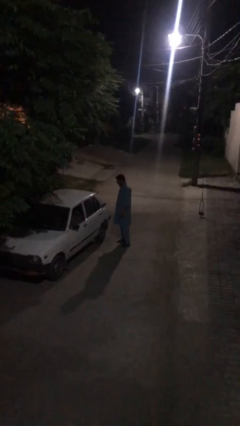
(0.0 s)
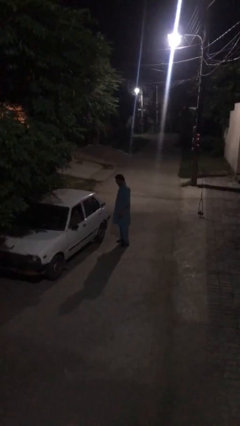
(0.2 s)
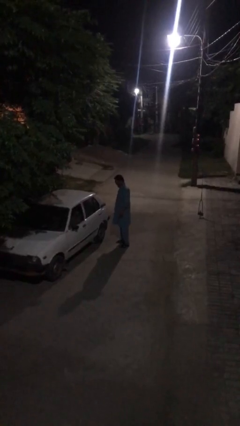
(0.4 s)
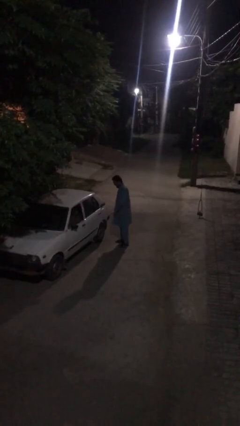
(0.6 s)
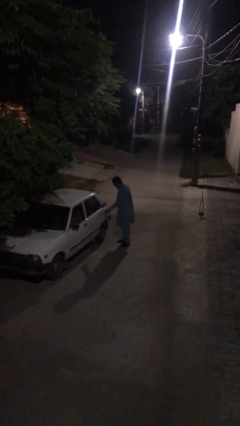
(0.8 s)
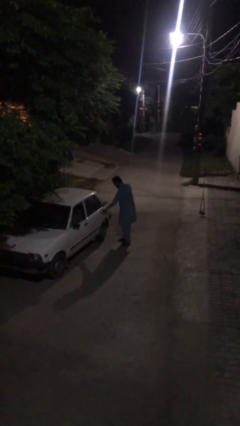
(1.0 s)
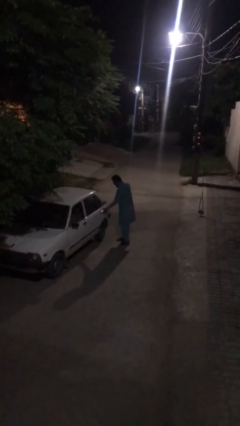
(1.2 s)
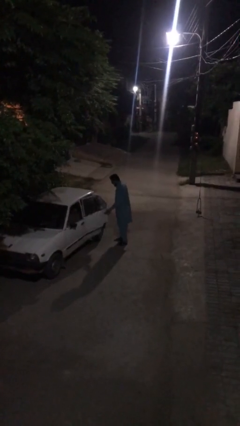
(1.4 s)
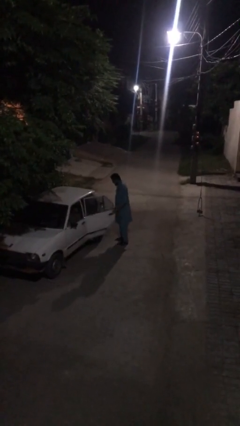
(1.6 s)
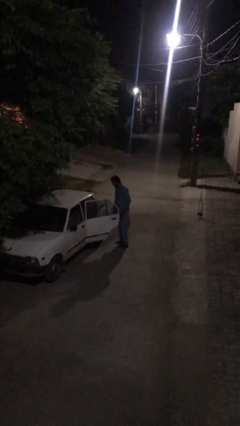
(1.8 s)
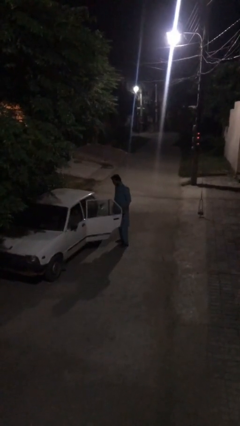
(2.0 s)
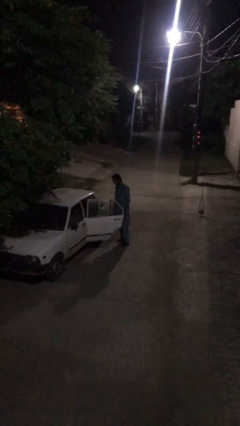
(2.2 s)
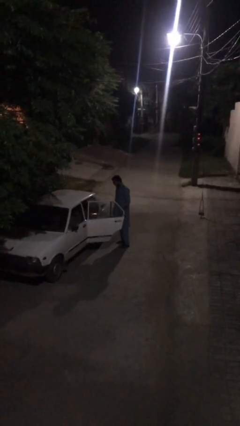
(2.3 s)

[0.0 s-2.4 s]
person opens car door

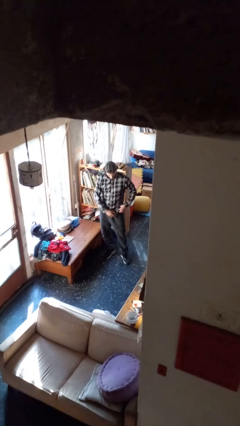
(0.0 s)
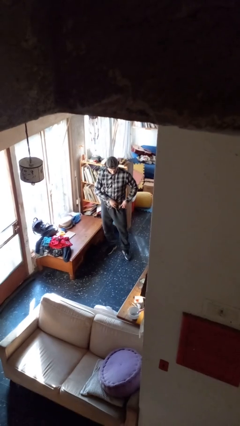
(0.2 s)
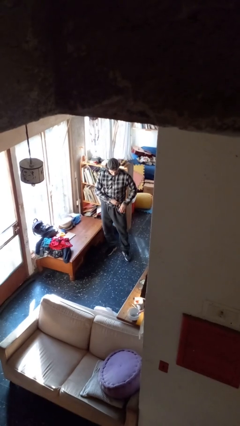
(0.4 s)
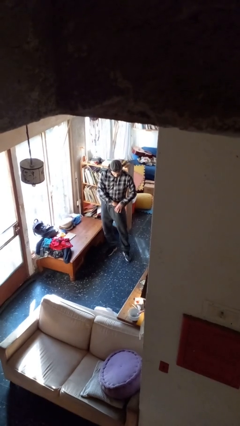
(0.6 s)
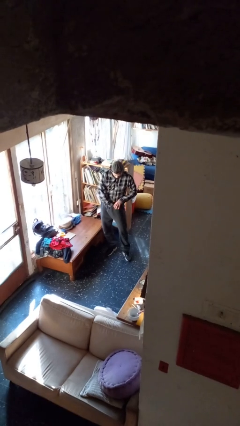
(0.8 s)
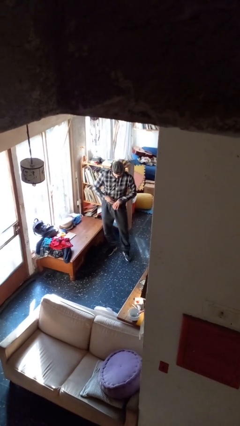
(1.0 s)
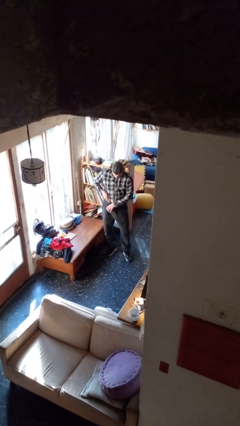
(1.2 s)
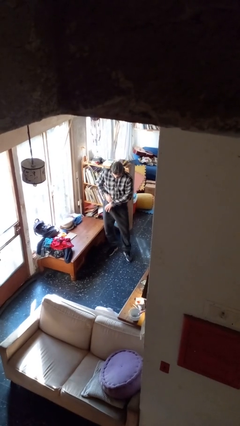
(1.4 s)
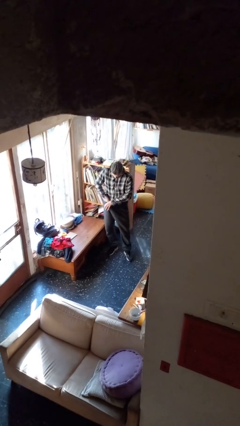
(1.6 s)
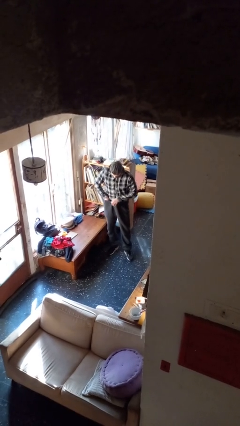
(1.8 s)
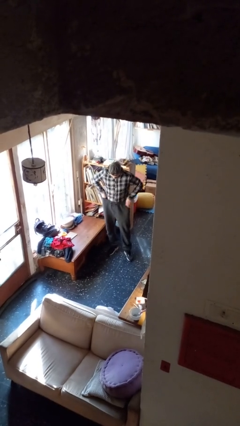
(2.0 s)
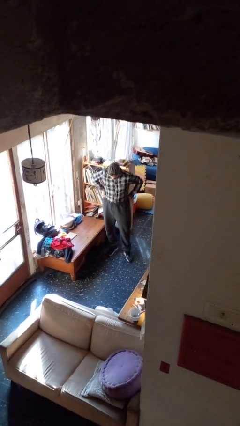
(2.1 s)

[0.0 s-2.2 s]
person tucks in shirt

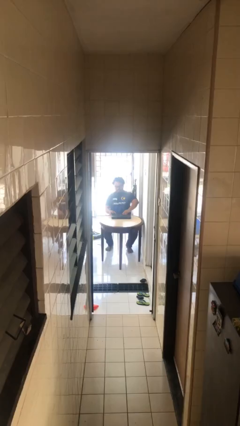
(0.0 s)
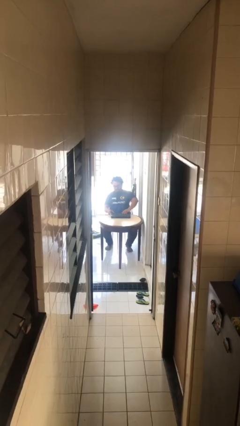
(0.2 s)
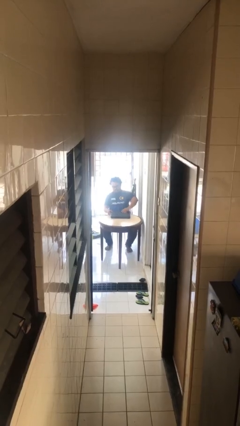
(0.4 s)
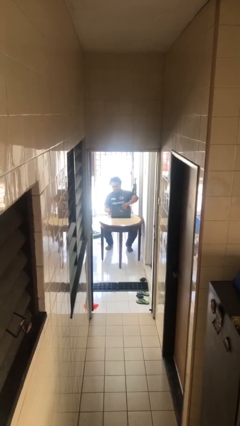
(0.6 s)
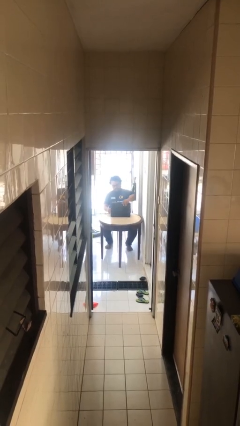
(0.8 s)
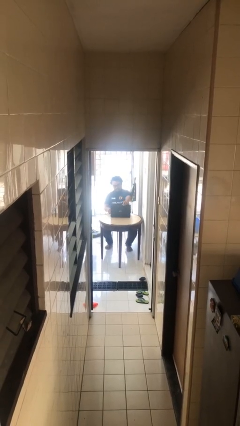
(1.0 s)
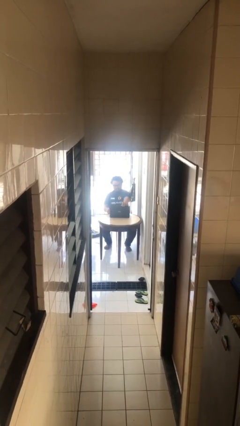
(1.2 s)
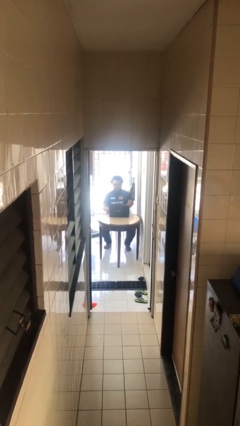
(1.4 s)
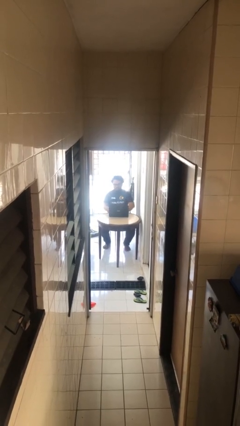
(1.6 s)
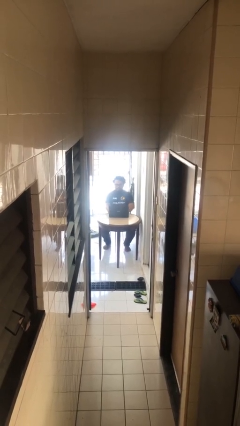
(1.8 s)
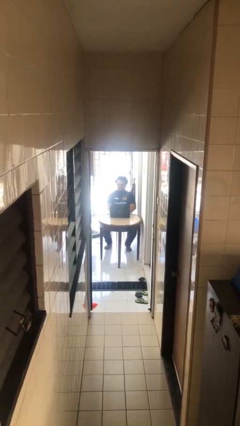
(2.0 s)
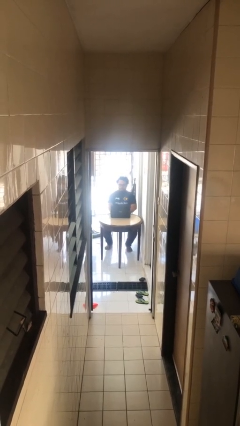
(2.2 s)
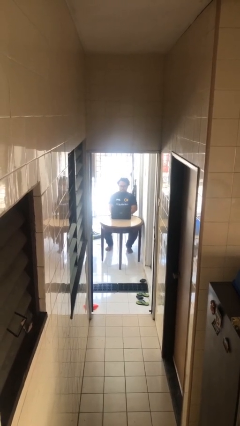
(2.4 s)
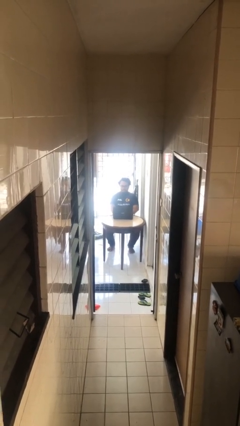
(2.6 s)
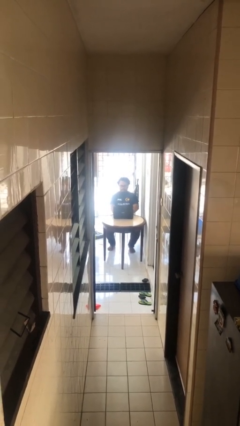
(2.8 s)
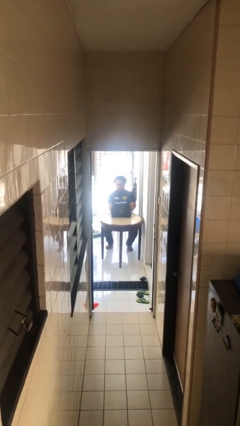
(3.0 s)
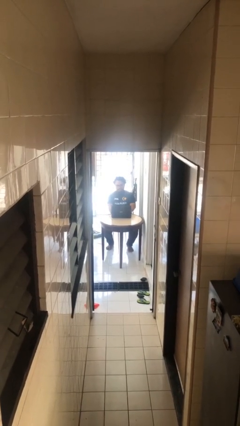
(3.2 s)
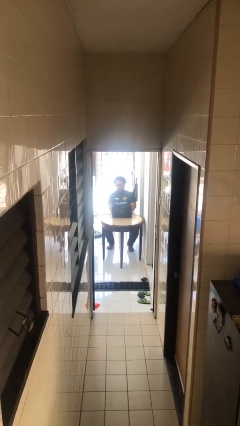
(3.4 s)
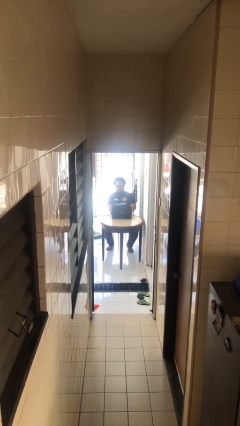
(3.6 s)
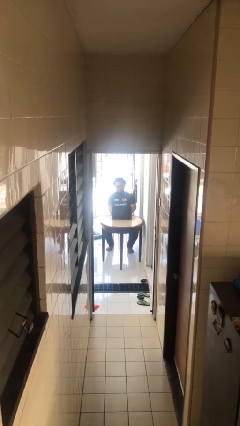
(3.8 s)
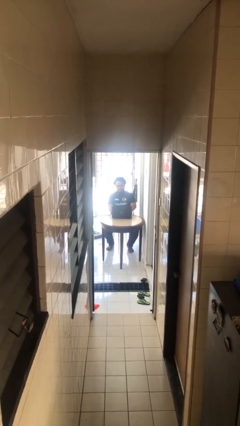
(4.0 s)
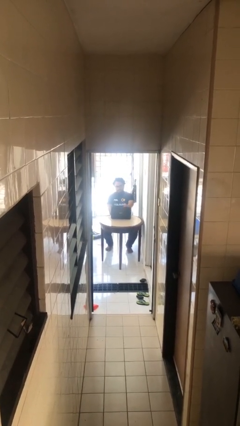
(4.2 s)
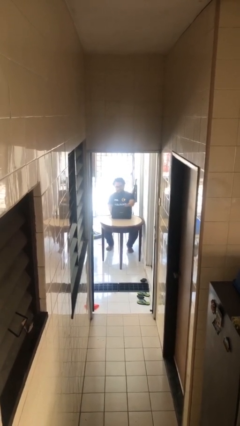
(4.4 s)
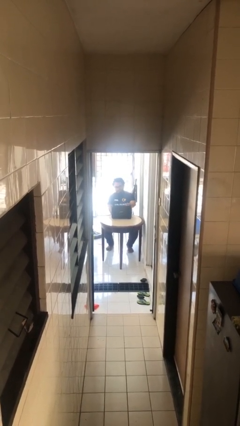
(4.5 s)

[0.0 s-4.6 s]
person interacts with laptop

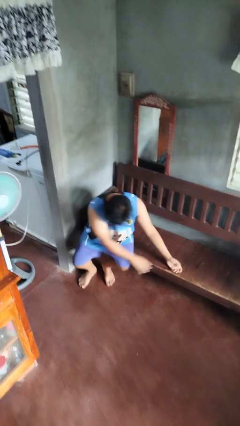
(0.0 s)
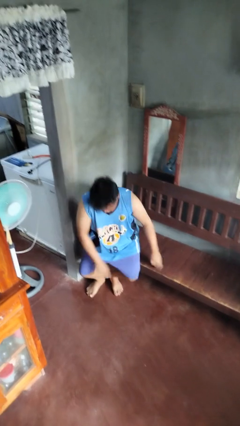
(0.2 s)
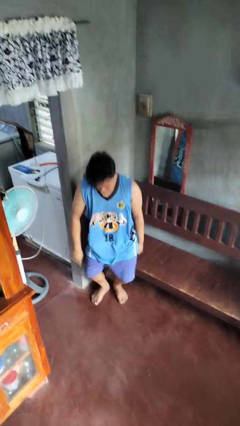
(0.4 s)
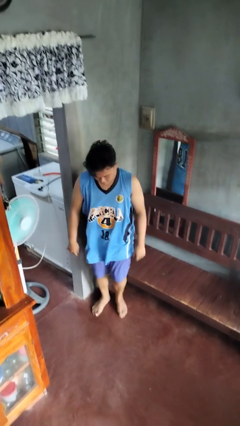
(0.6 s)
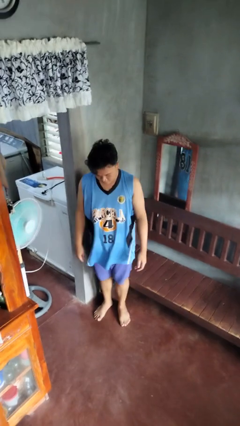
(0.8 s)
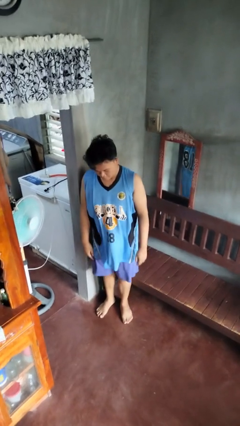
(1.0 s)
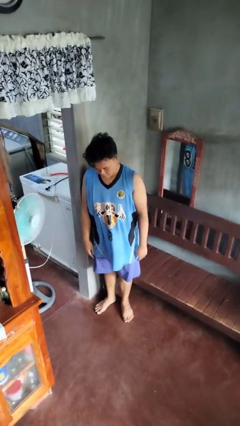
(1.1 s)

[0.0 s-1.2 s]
person stands up

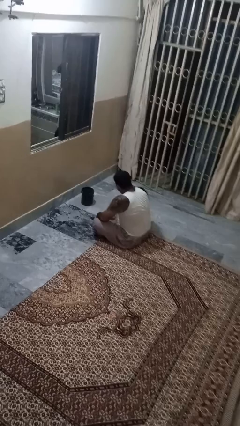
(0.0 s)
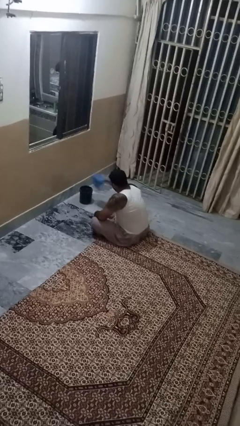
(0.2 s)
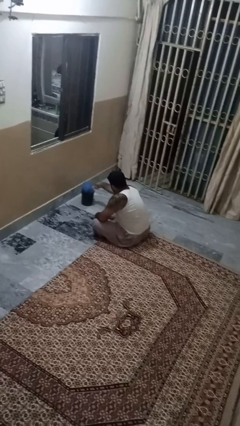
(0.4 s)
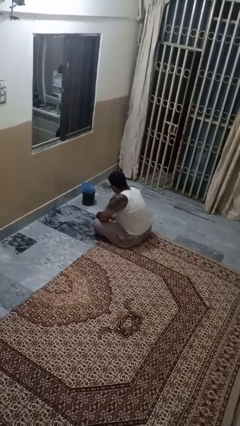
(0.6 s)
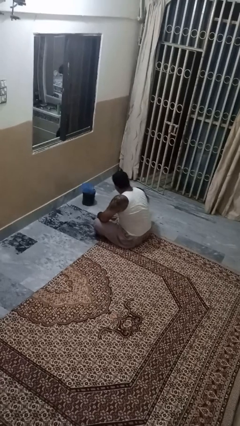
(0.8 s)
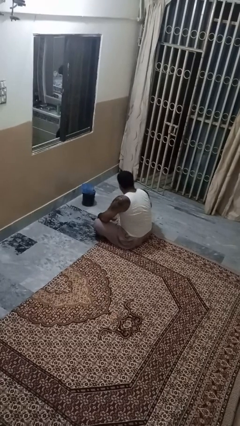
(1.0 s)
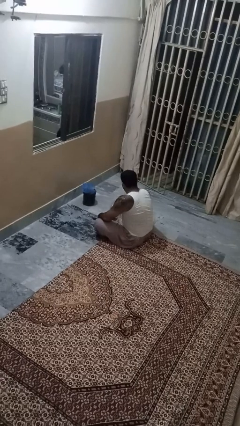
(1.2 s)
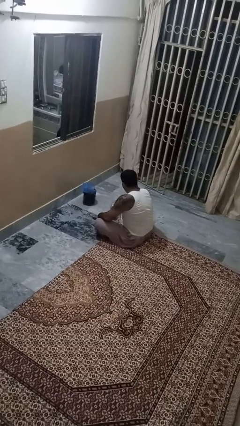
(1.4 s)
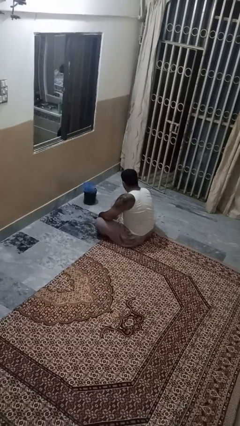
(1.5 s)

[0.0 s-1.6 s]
person discards trash

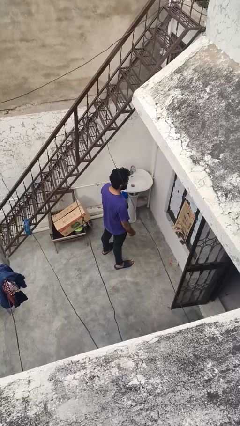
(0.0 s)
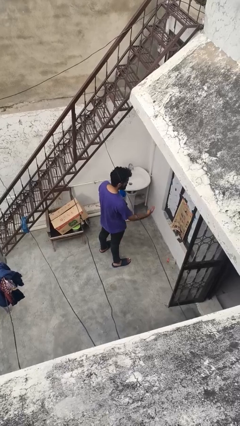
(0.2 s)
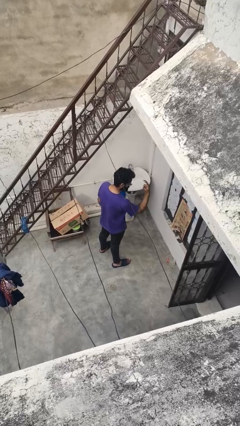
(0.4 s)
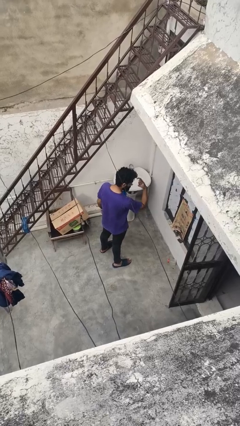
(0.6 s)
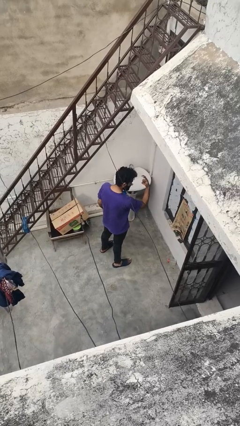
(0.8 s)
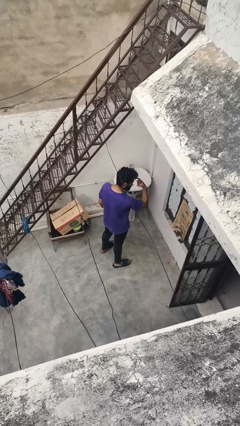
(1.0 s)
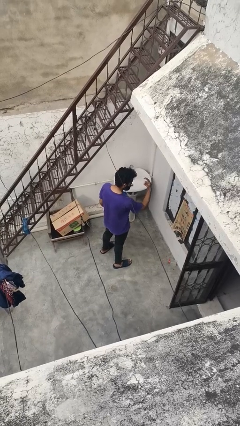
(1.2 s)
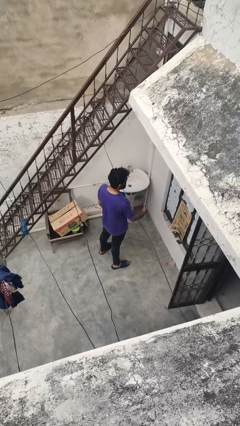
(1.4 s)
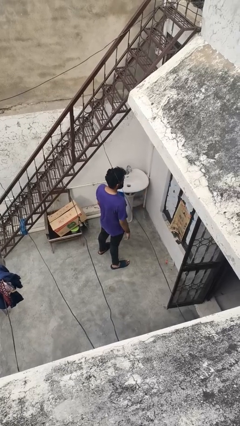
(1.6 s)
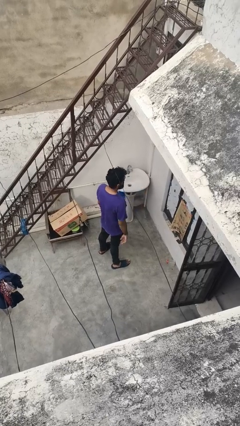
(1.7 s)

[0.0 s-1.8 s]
person gestures watch closely

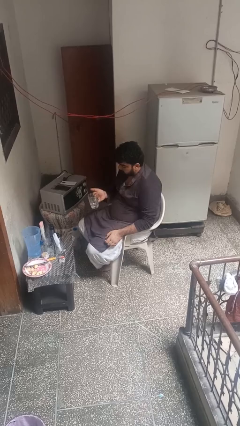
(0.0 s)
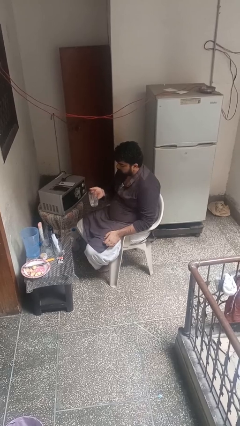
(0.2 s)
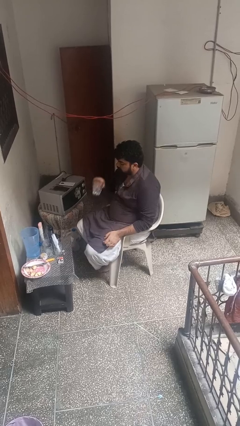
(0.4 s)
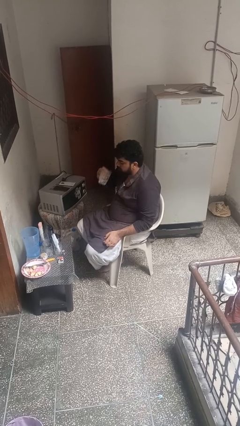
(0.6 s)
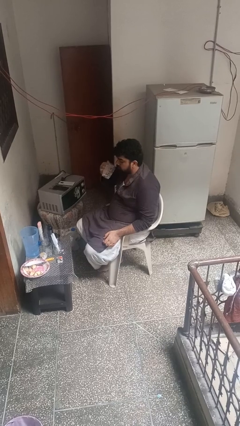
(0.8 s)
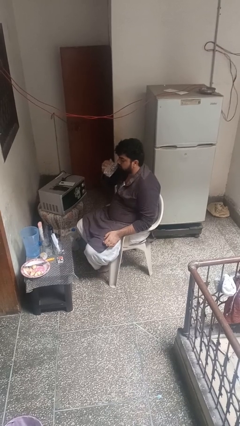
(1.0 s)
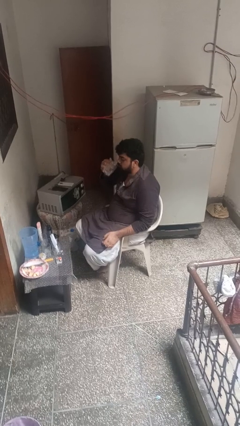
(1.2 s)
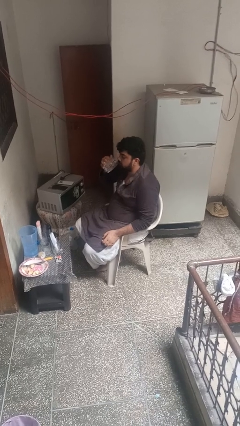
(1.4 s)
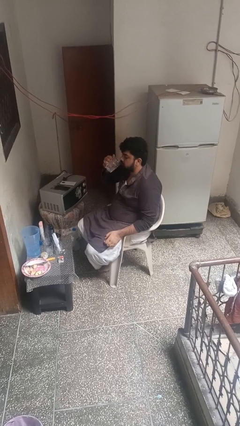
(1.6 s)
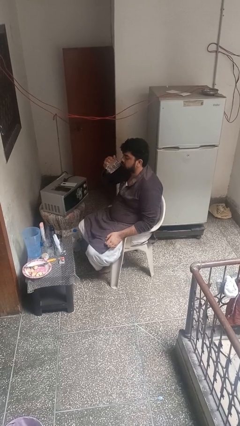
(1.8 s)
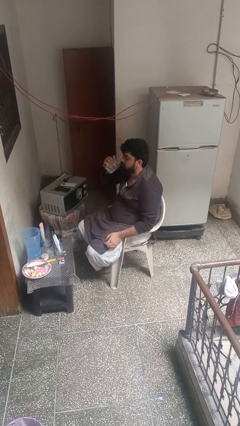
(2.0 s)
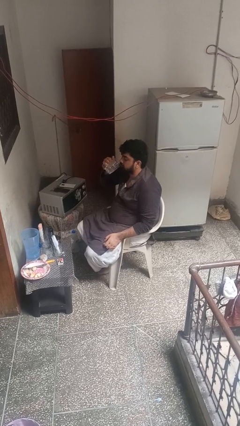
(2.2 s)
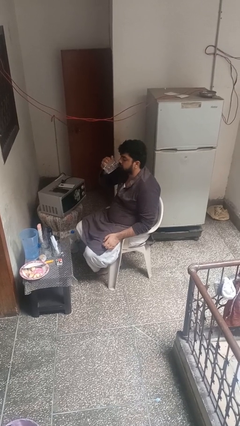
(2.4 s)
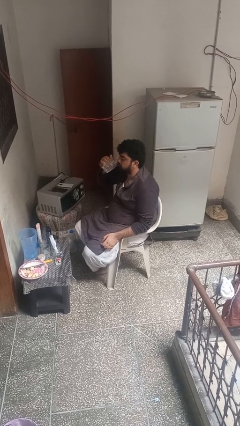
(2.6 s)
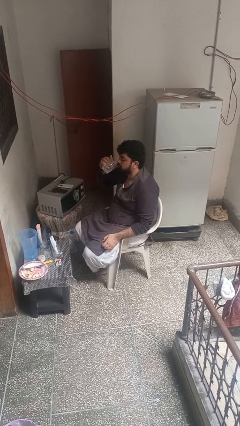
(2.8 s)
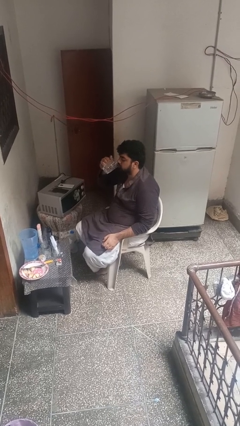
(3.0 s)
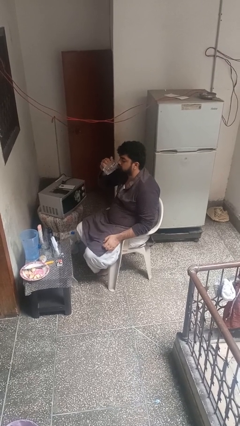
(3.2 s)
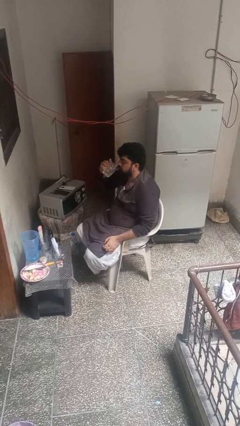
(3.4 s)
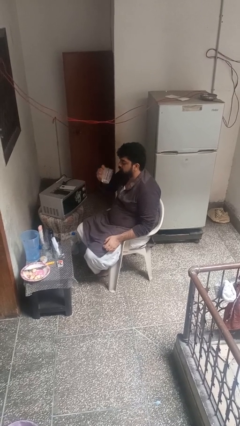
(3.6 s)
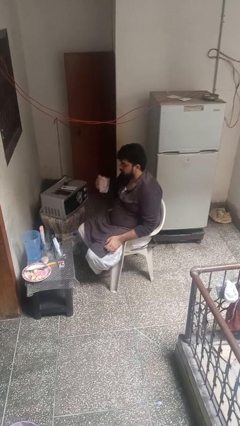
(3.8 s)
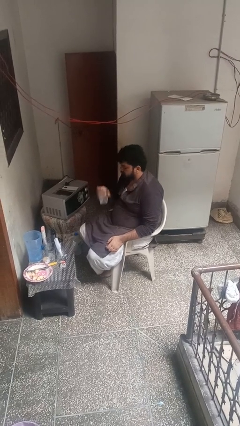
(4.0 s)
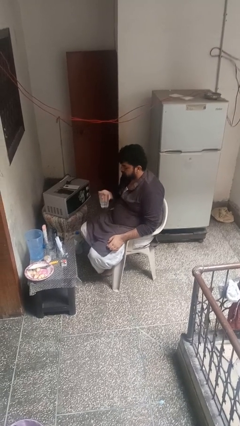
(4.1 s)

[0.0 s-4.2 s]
person drinks from mug
